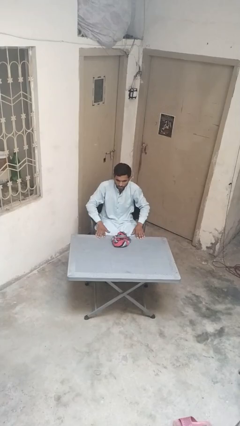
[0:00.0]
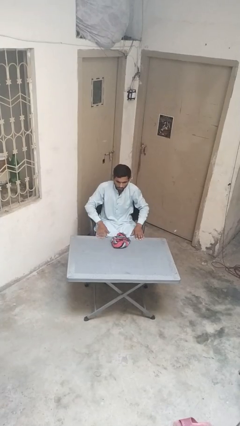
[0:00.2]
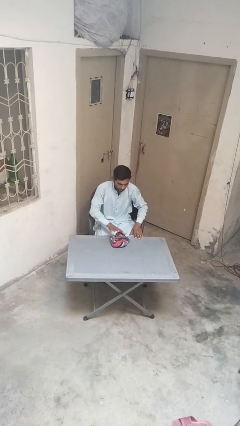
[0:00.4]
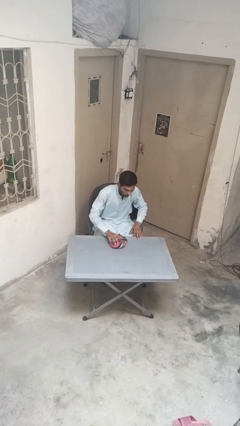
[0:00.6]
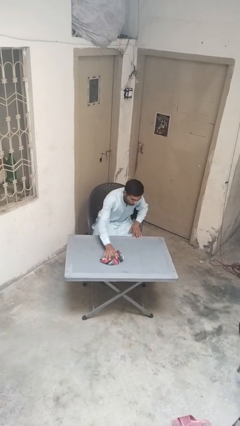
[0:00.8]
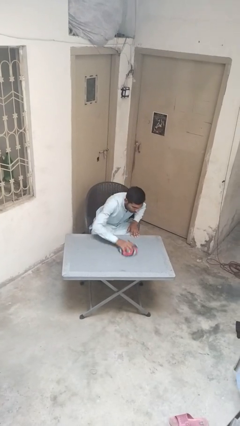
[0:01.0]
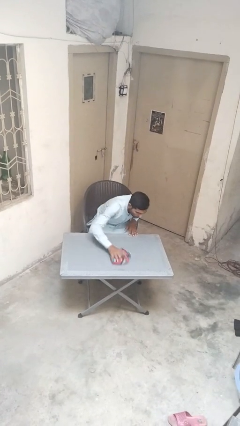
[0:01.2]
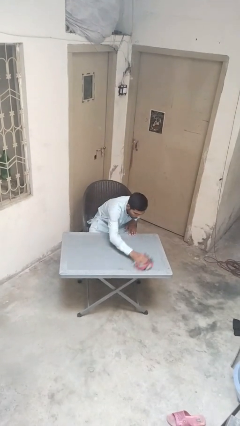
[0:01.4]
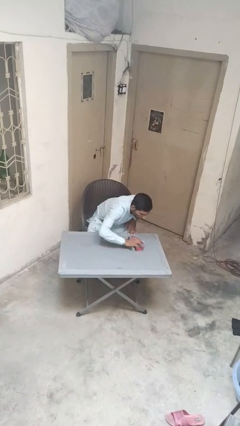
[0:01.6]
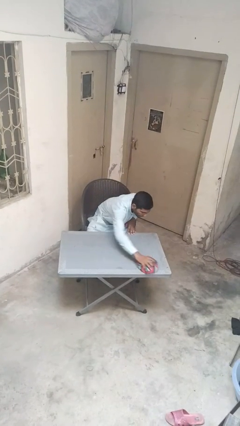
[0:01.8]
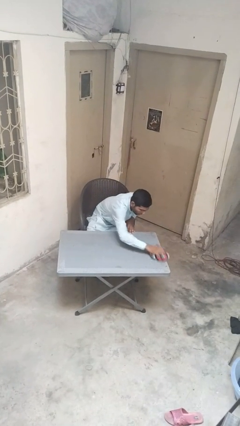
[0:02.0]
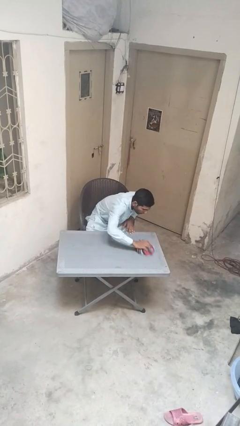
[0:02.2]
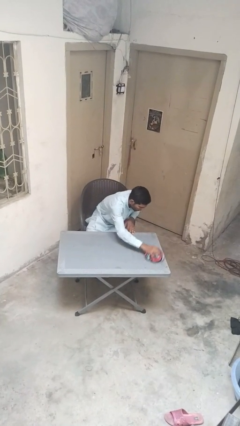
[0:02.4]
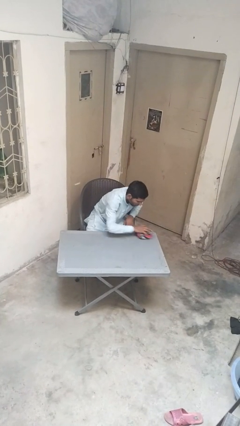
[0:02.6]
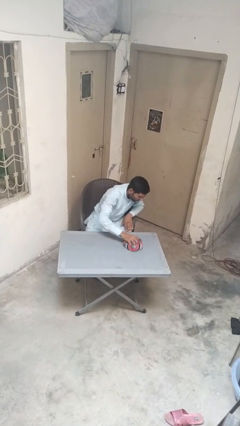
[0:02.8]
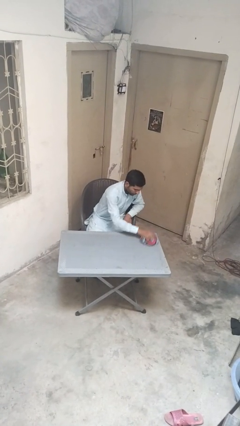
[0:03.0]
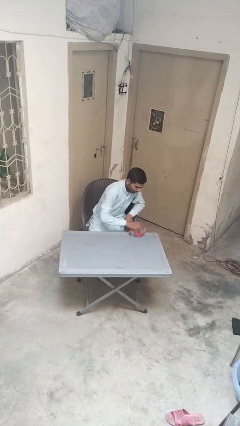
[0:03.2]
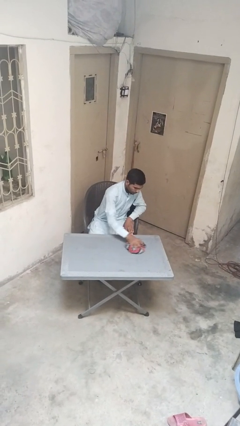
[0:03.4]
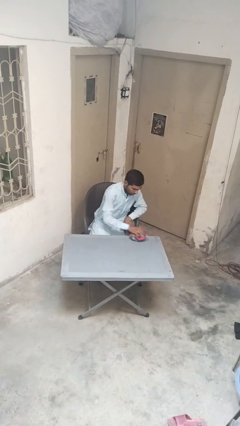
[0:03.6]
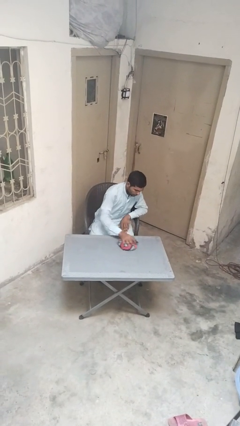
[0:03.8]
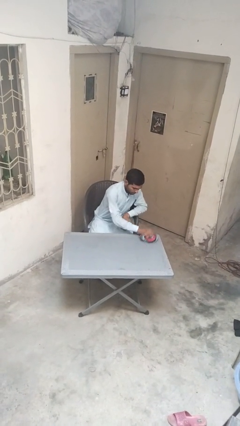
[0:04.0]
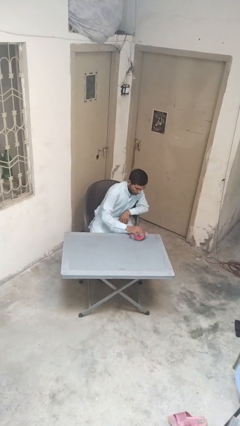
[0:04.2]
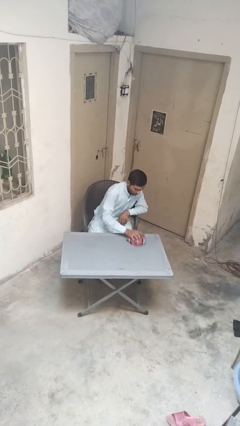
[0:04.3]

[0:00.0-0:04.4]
person cleans table with rag

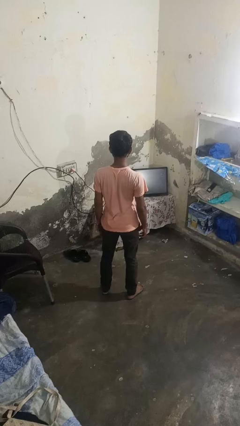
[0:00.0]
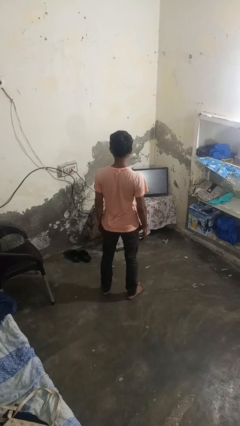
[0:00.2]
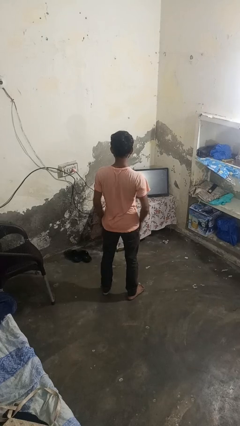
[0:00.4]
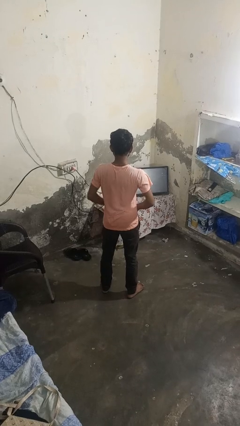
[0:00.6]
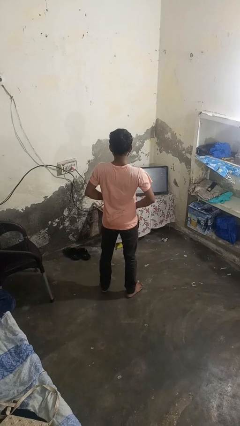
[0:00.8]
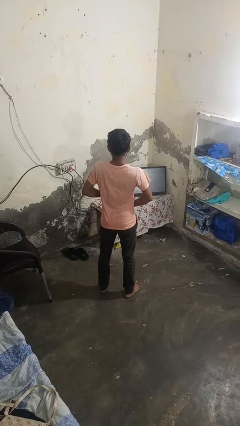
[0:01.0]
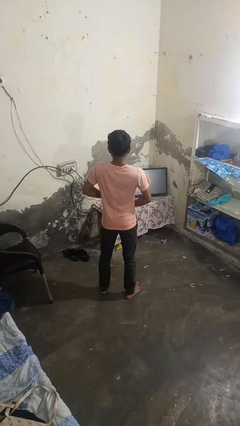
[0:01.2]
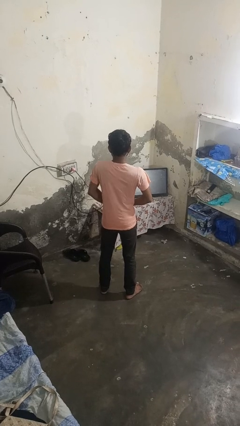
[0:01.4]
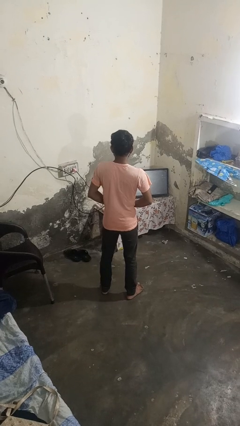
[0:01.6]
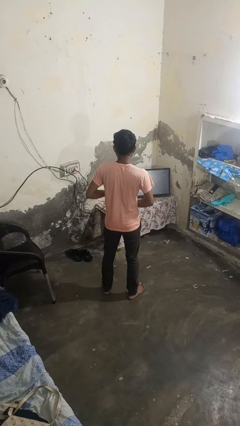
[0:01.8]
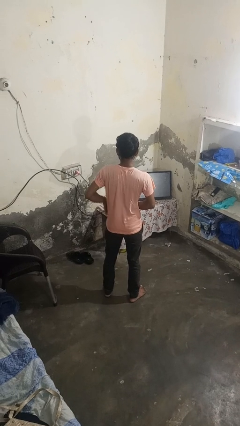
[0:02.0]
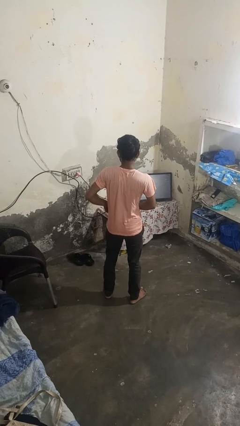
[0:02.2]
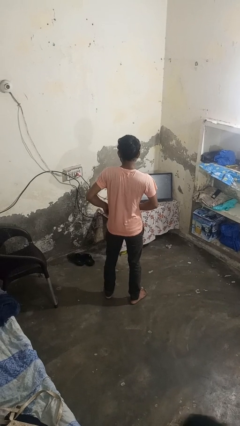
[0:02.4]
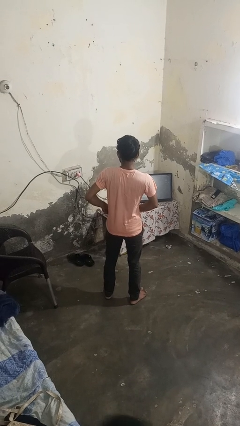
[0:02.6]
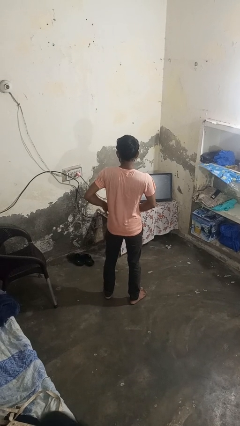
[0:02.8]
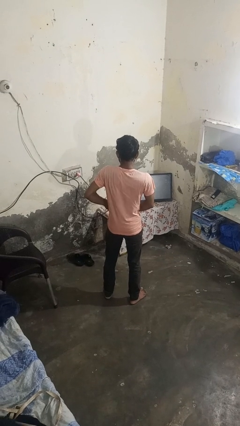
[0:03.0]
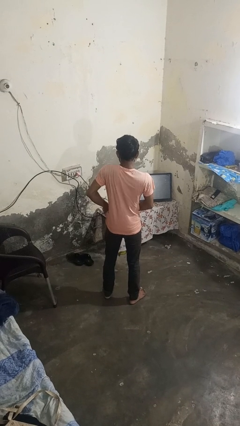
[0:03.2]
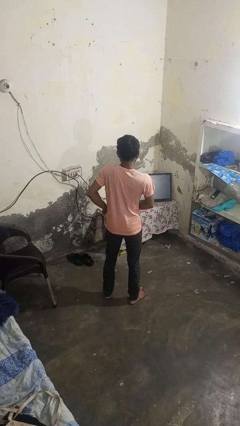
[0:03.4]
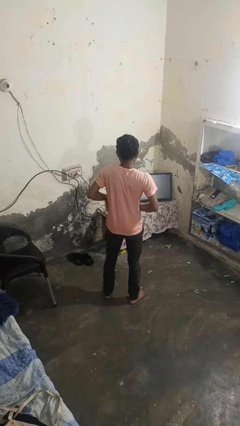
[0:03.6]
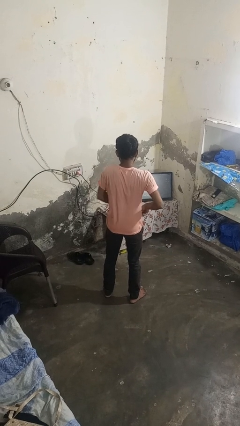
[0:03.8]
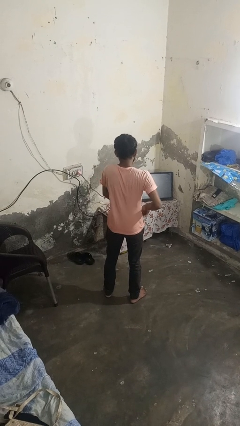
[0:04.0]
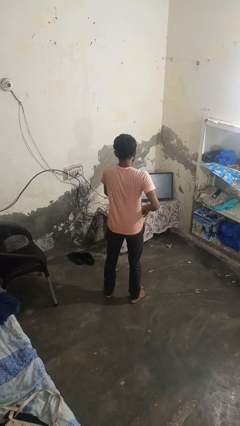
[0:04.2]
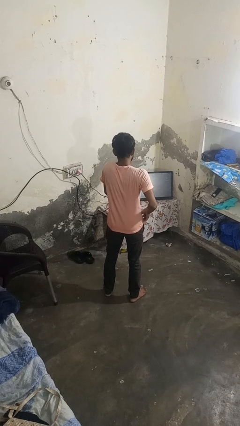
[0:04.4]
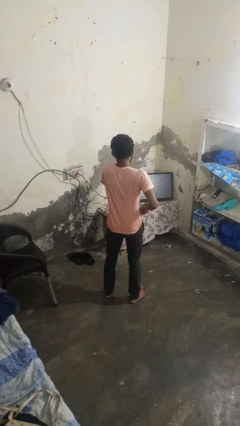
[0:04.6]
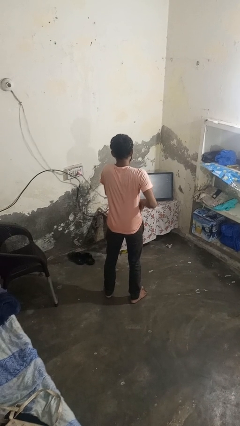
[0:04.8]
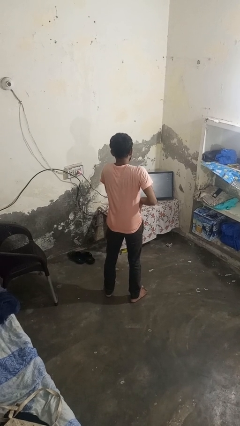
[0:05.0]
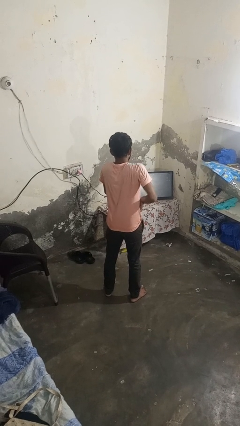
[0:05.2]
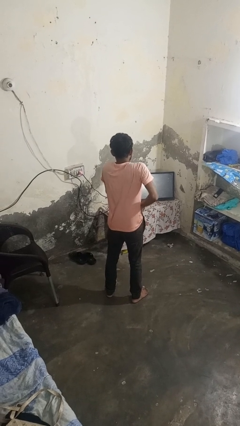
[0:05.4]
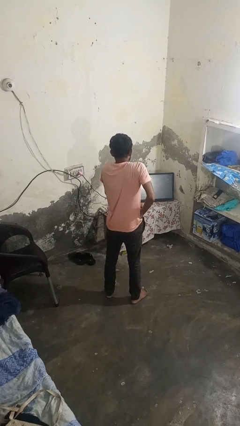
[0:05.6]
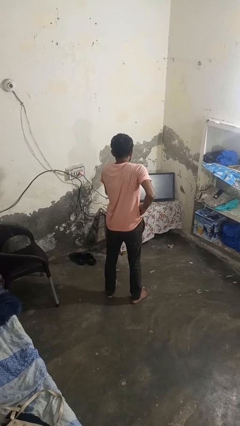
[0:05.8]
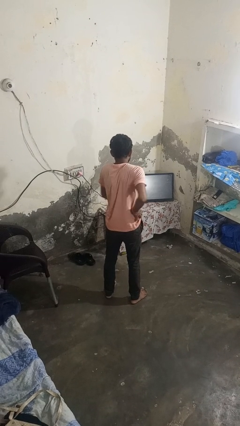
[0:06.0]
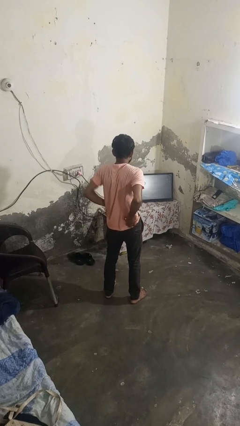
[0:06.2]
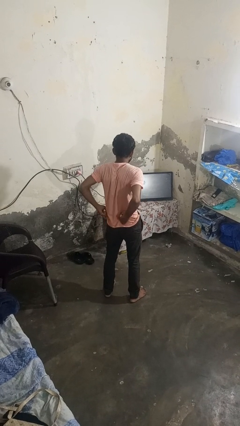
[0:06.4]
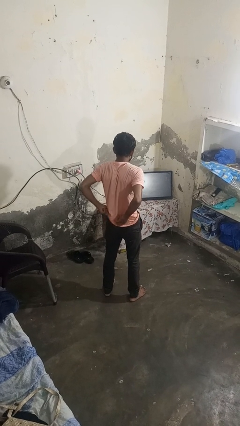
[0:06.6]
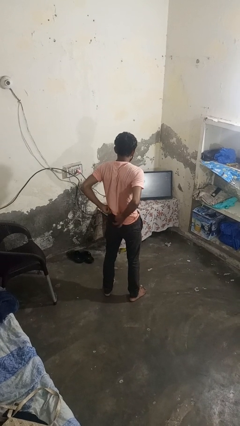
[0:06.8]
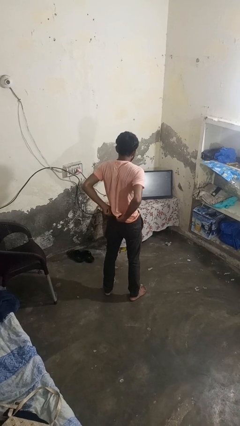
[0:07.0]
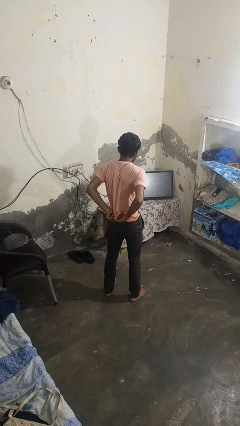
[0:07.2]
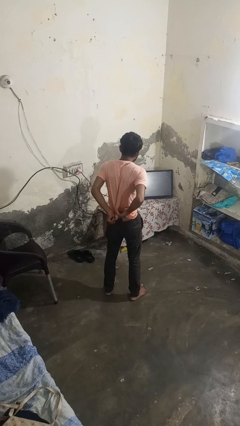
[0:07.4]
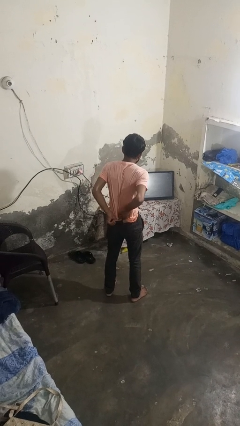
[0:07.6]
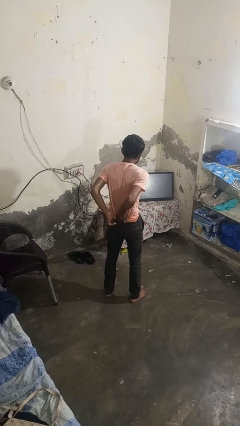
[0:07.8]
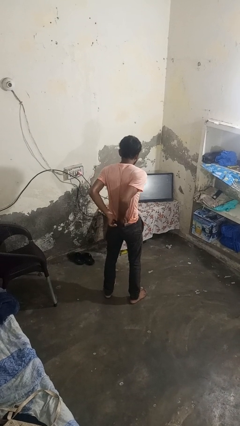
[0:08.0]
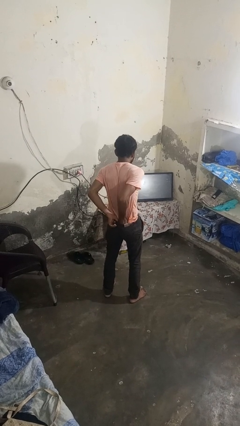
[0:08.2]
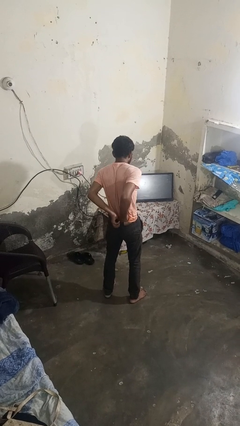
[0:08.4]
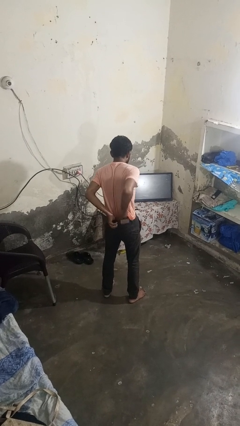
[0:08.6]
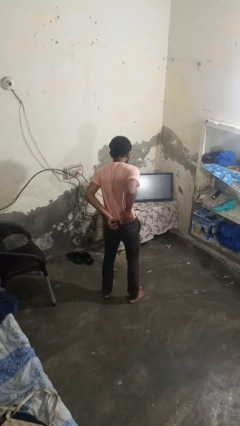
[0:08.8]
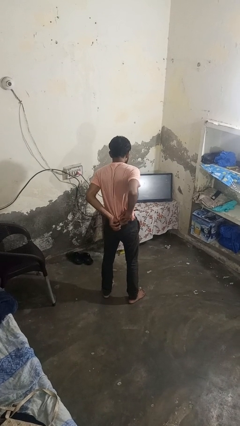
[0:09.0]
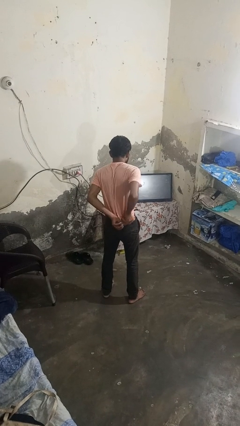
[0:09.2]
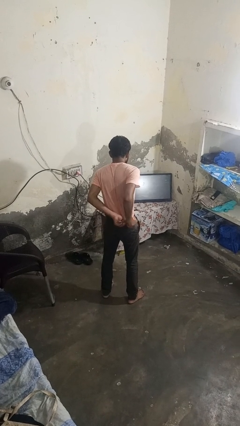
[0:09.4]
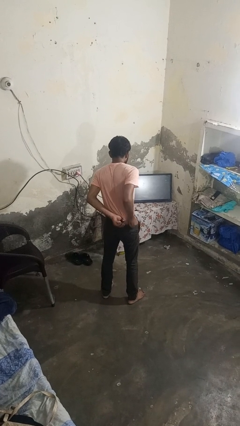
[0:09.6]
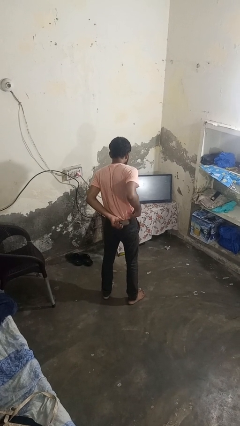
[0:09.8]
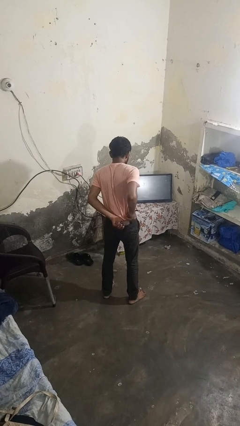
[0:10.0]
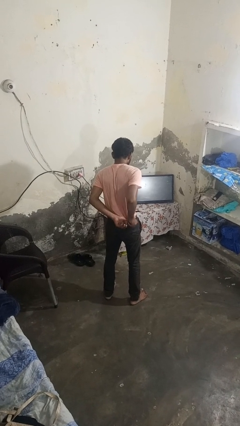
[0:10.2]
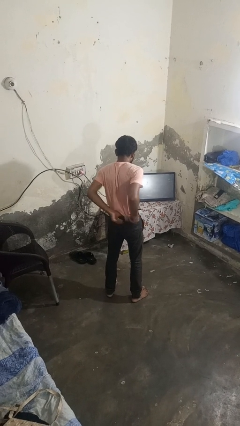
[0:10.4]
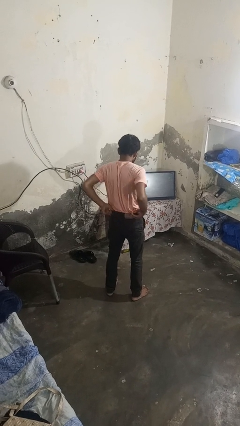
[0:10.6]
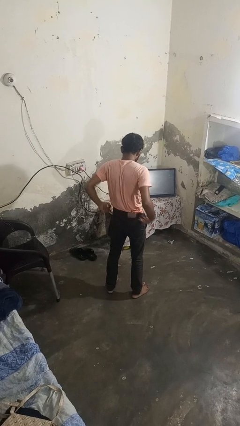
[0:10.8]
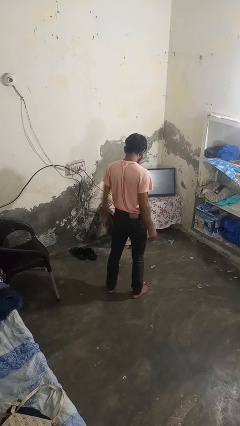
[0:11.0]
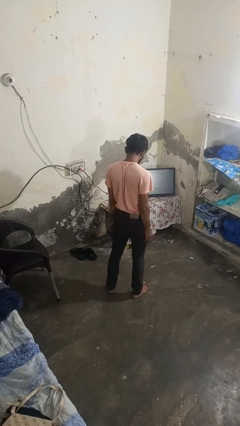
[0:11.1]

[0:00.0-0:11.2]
person tucks in shirt

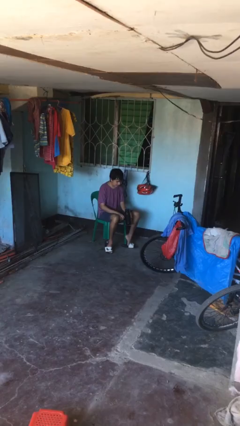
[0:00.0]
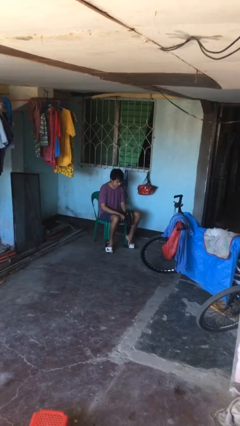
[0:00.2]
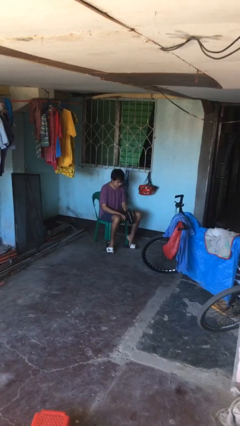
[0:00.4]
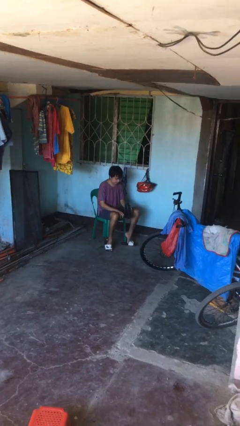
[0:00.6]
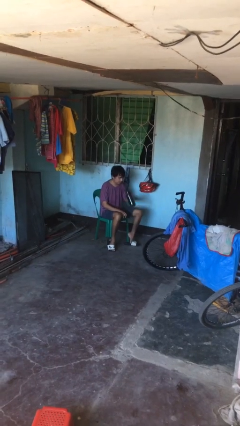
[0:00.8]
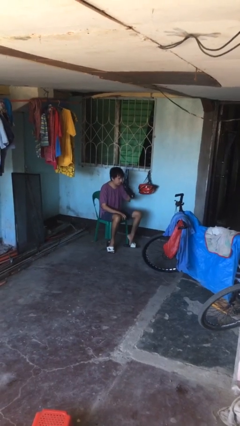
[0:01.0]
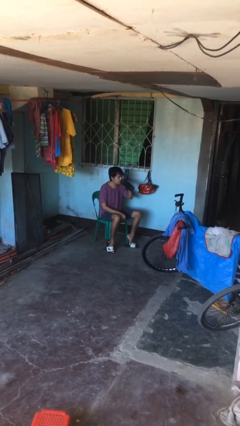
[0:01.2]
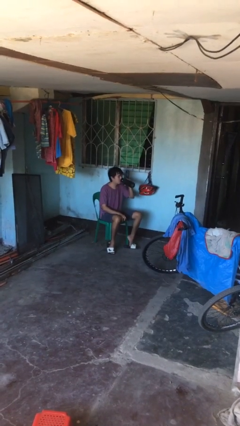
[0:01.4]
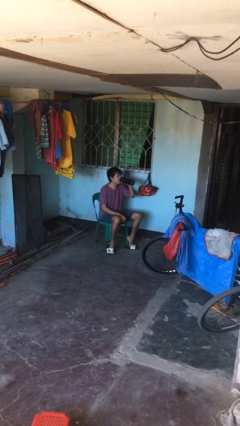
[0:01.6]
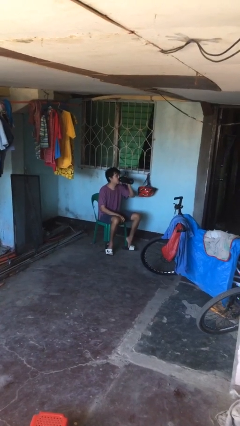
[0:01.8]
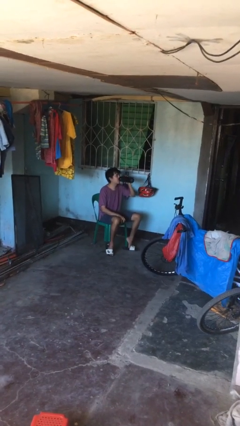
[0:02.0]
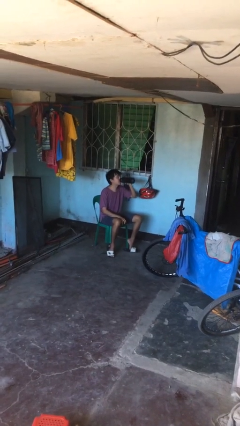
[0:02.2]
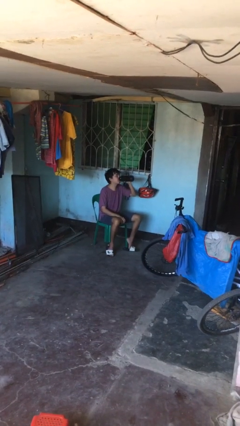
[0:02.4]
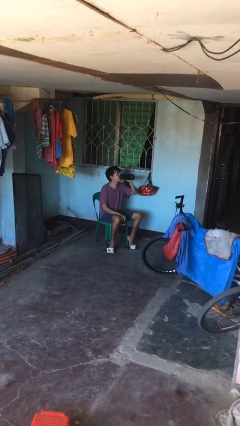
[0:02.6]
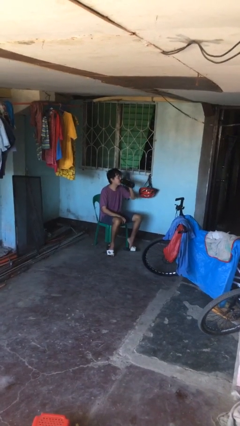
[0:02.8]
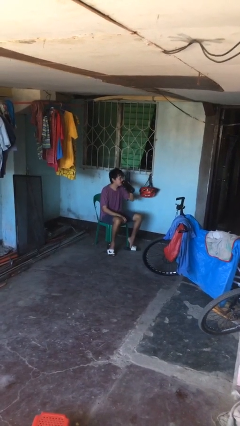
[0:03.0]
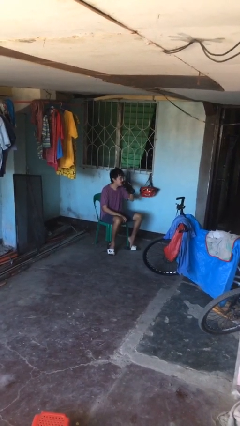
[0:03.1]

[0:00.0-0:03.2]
person drinks from bottle
